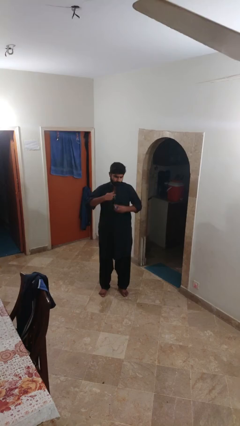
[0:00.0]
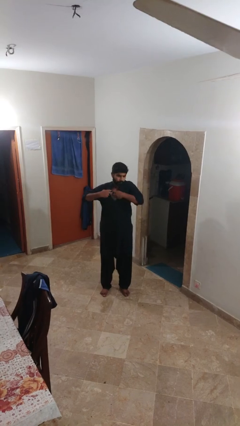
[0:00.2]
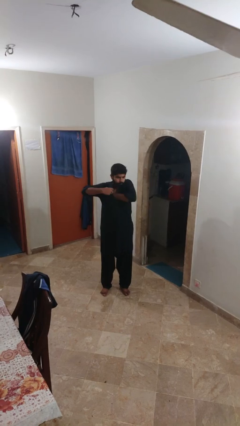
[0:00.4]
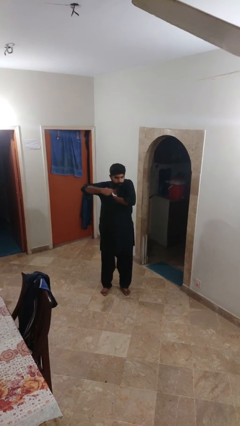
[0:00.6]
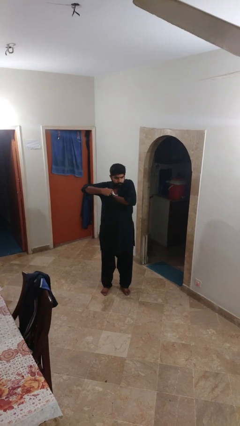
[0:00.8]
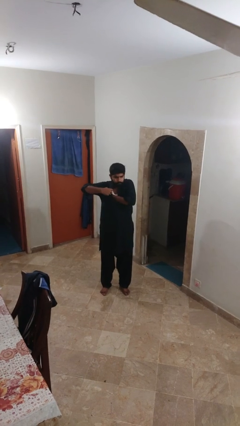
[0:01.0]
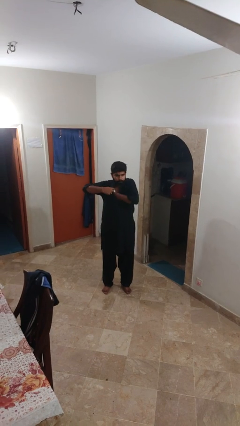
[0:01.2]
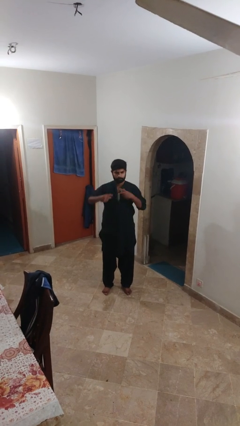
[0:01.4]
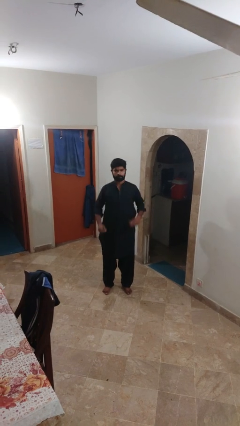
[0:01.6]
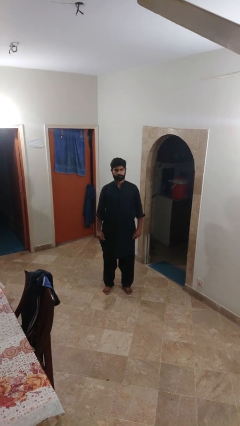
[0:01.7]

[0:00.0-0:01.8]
person applies deodorant

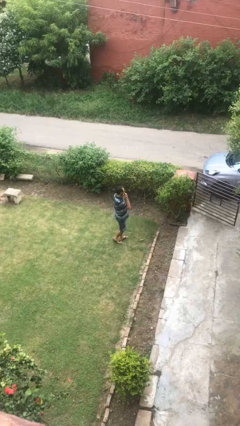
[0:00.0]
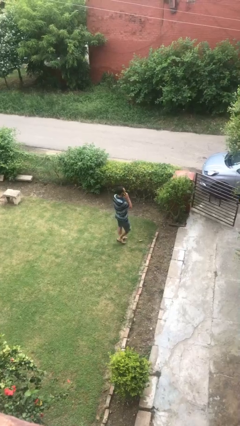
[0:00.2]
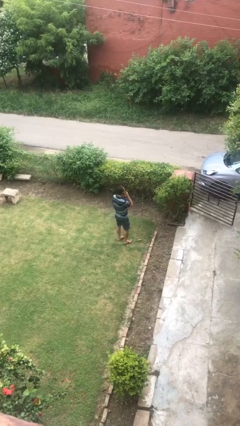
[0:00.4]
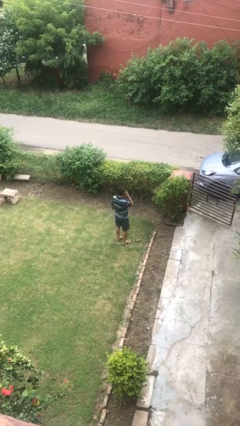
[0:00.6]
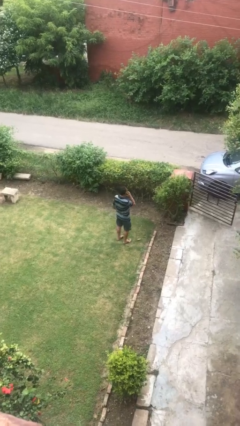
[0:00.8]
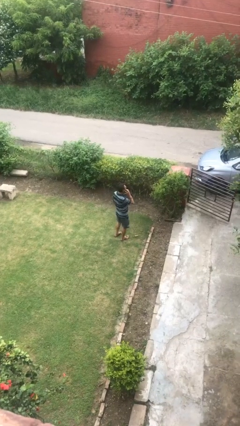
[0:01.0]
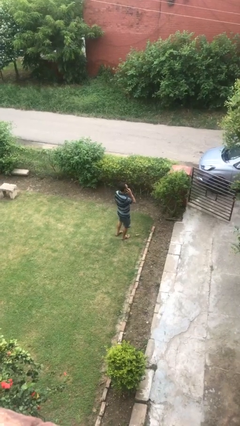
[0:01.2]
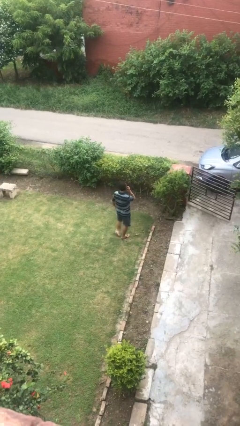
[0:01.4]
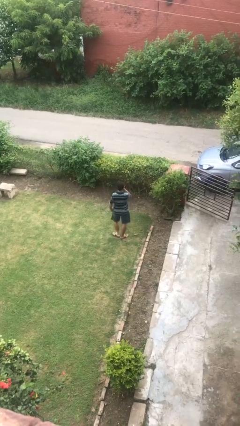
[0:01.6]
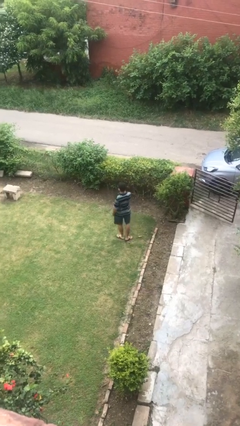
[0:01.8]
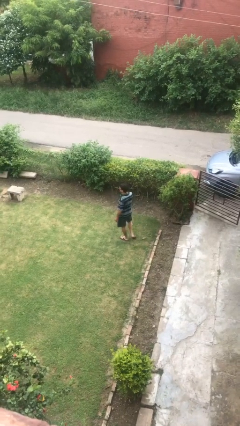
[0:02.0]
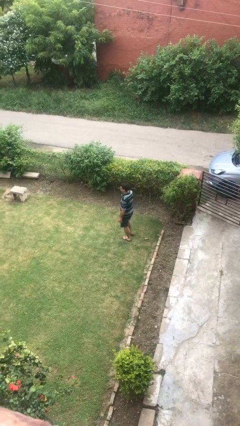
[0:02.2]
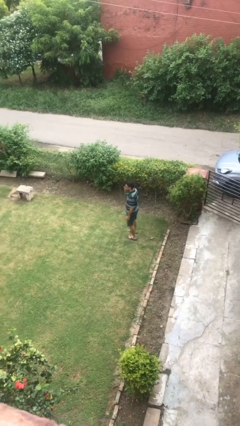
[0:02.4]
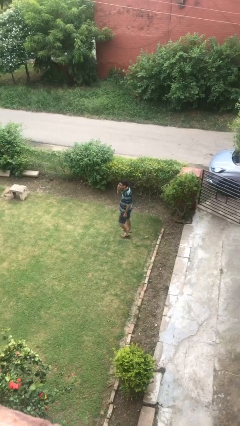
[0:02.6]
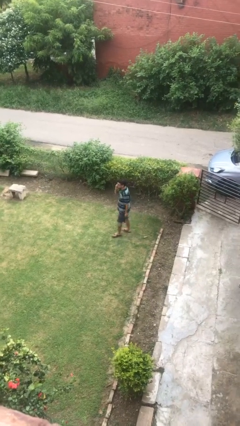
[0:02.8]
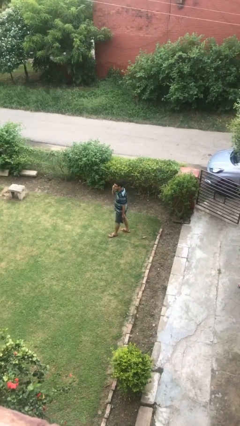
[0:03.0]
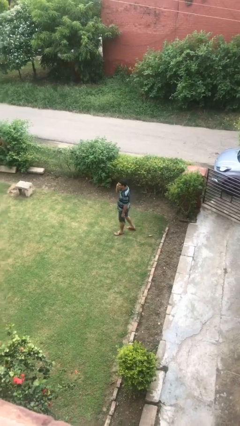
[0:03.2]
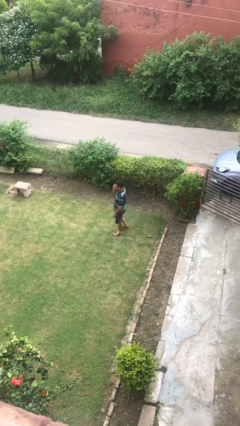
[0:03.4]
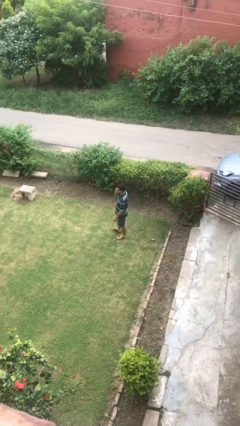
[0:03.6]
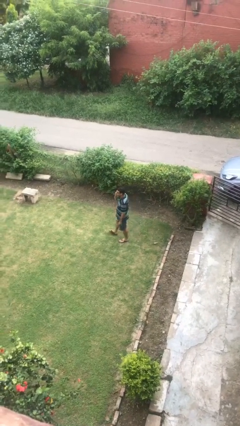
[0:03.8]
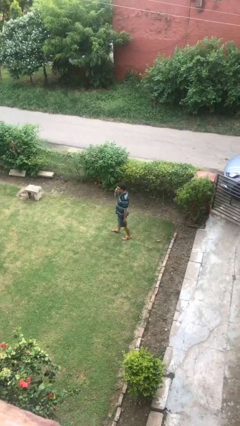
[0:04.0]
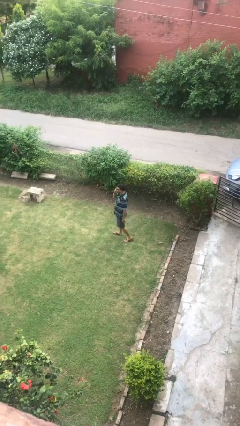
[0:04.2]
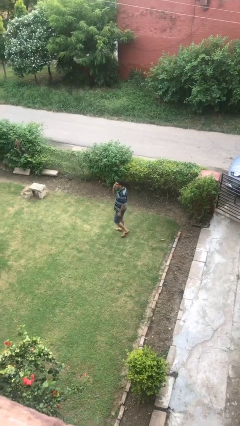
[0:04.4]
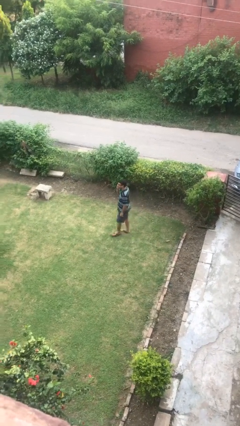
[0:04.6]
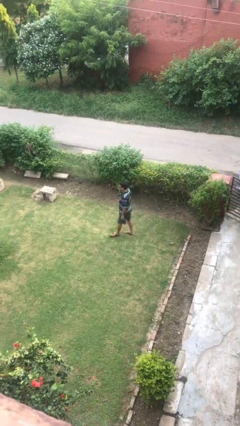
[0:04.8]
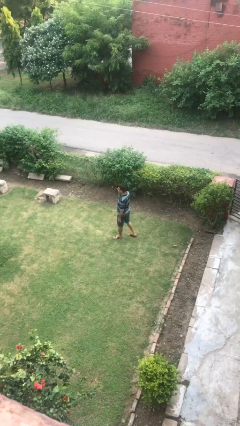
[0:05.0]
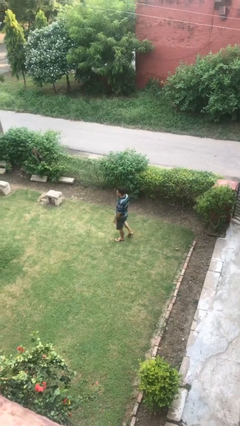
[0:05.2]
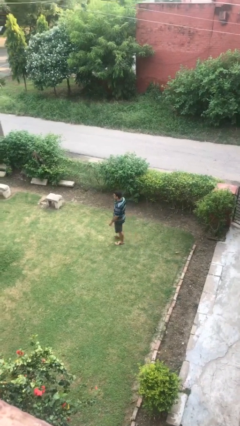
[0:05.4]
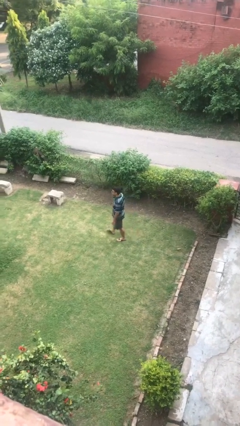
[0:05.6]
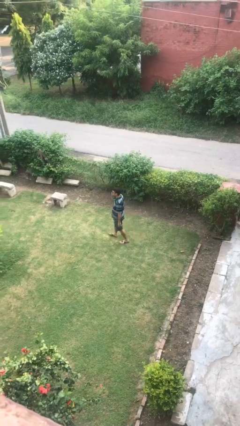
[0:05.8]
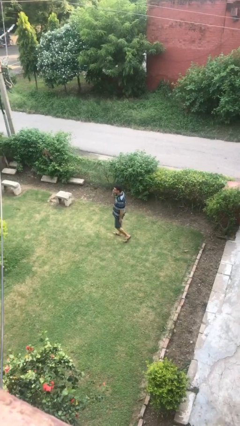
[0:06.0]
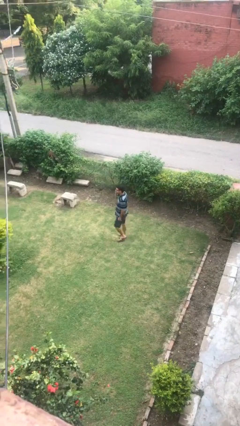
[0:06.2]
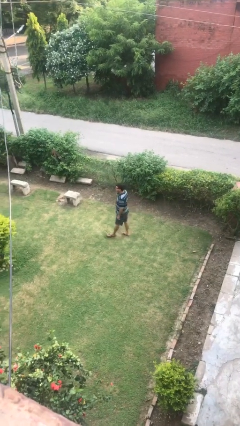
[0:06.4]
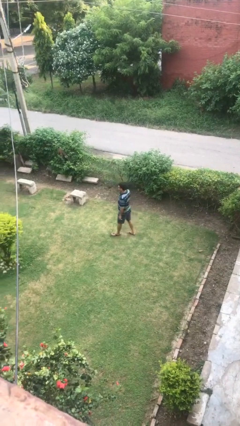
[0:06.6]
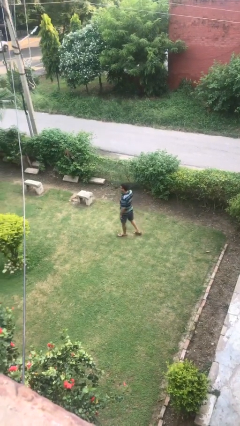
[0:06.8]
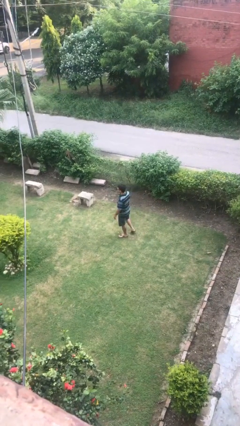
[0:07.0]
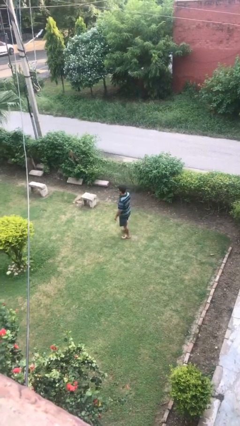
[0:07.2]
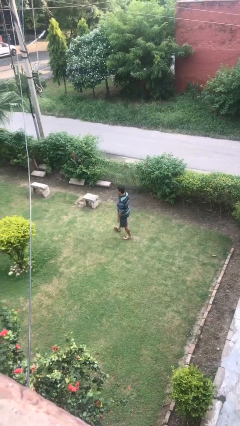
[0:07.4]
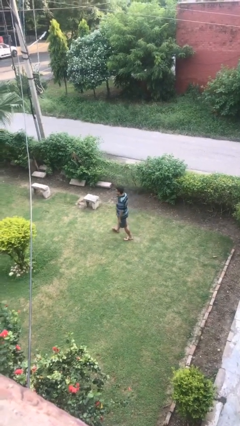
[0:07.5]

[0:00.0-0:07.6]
person talks on phone

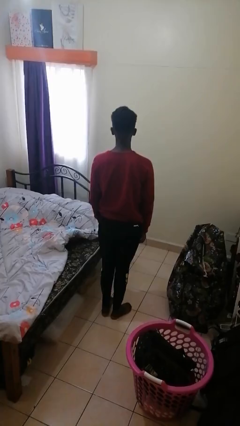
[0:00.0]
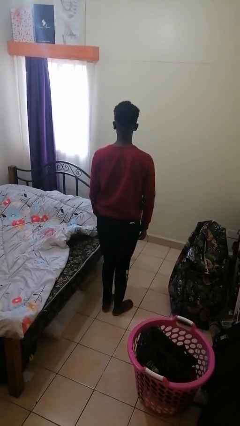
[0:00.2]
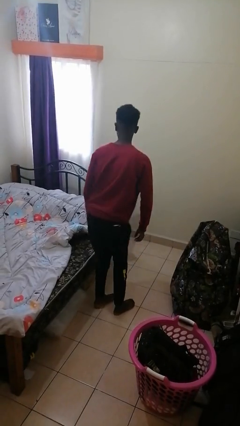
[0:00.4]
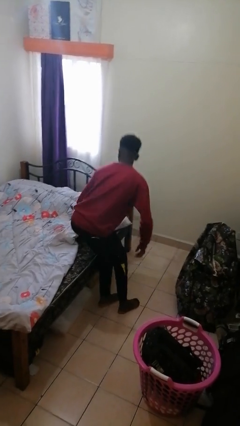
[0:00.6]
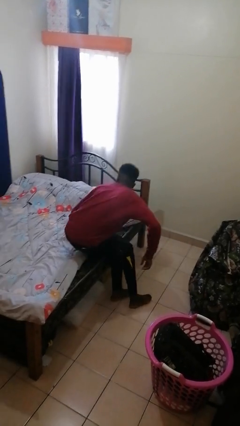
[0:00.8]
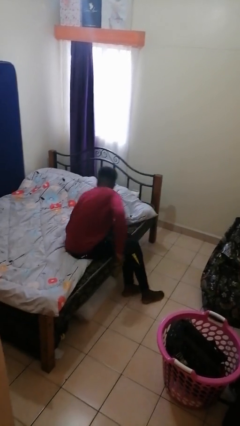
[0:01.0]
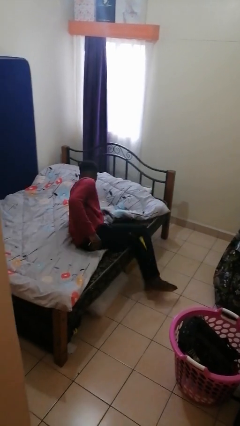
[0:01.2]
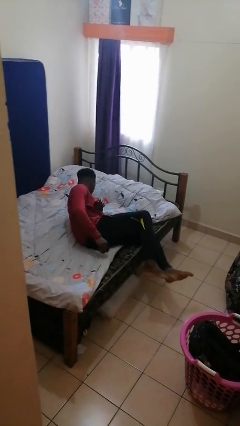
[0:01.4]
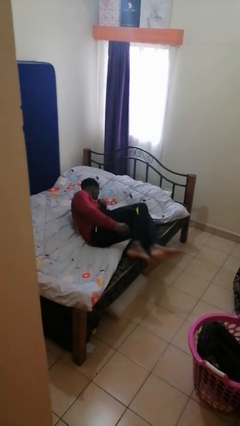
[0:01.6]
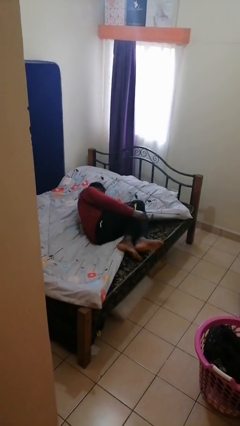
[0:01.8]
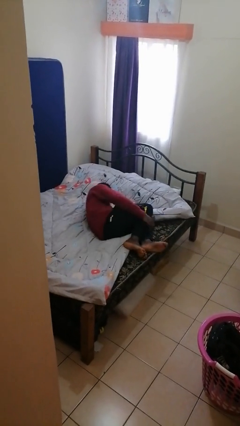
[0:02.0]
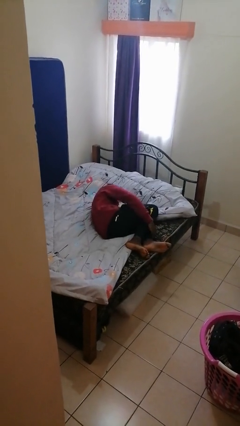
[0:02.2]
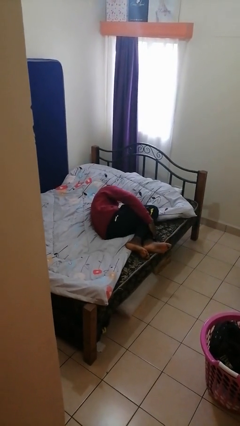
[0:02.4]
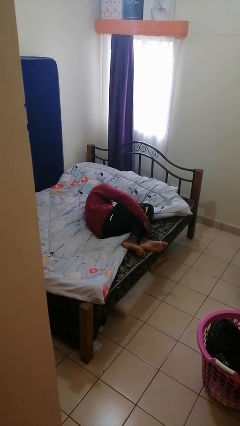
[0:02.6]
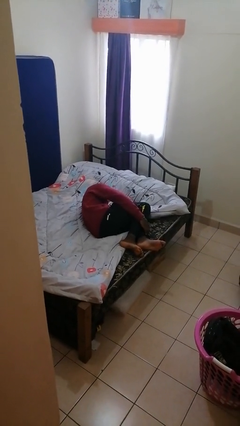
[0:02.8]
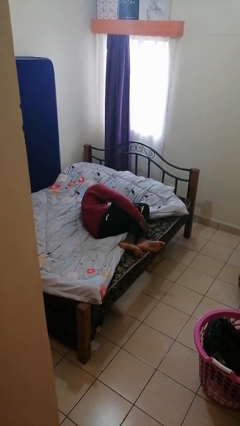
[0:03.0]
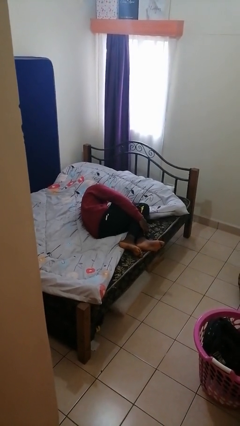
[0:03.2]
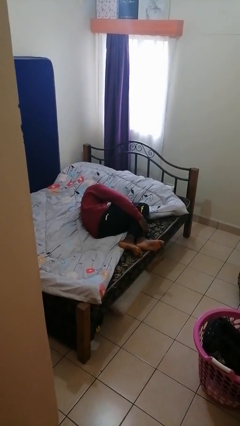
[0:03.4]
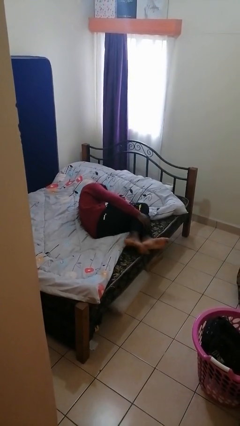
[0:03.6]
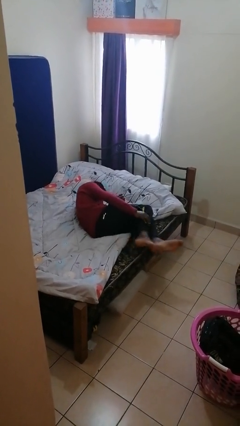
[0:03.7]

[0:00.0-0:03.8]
person lies down on bed

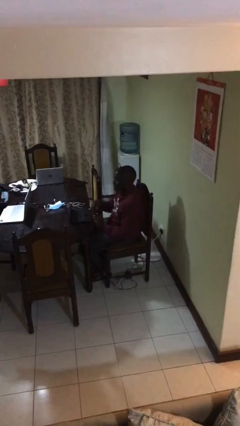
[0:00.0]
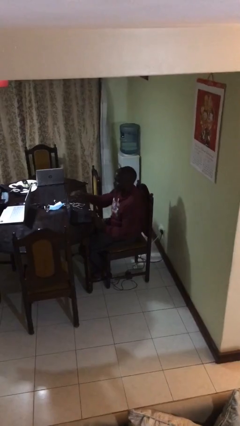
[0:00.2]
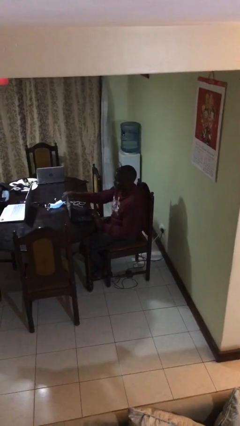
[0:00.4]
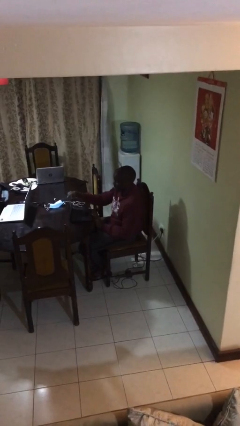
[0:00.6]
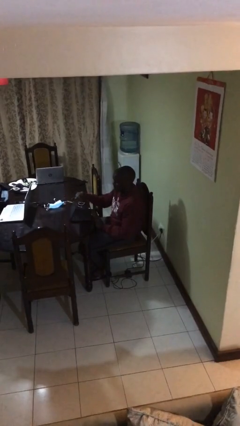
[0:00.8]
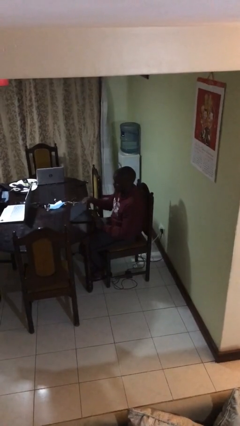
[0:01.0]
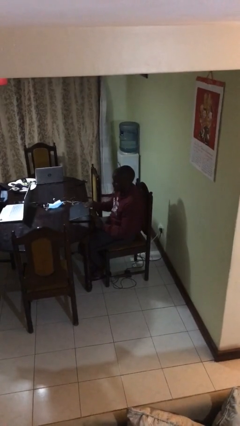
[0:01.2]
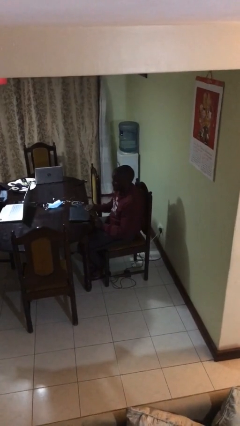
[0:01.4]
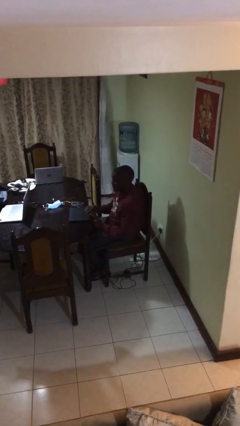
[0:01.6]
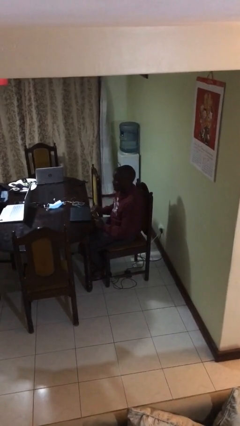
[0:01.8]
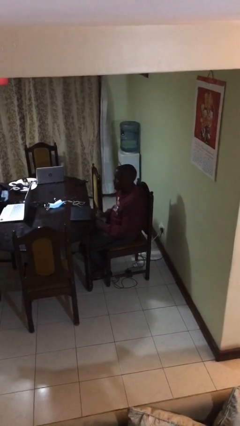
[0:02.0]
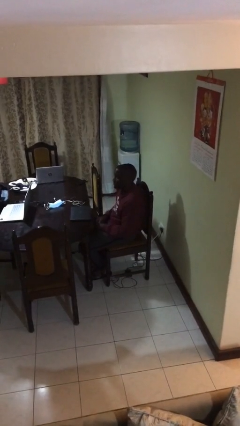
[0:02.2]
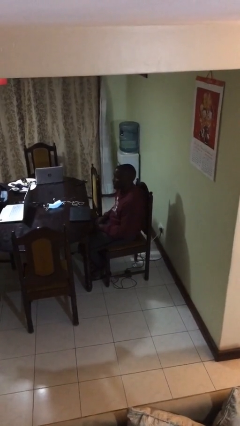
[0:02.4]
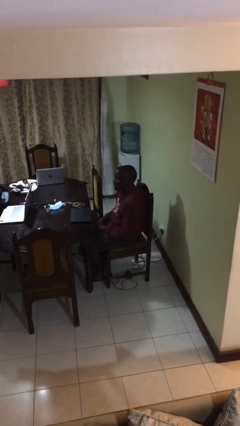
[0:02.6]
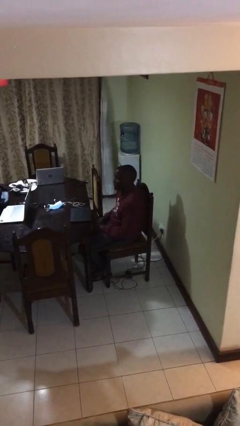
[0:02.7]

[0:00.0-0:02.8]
person closes laptop

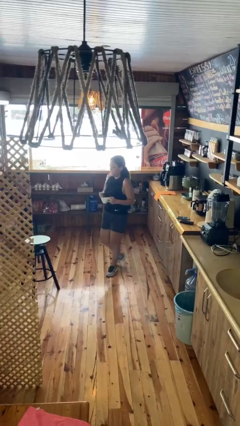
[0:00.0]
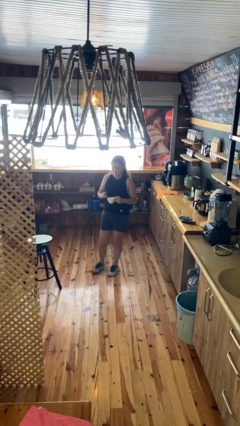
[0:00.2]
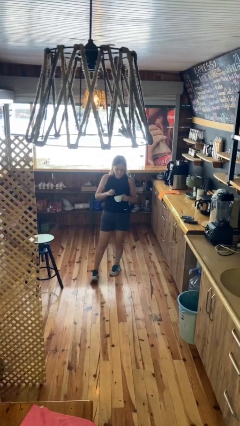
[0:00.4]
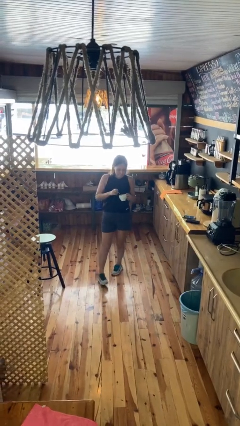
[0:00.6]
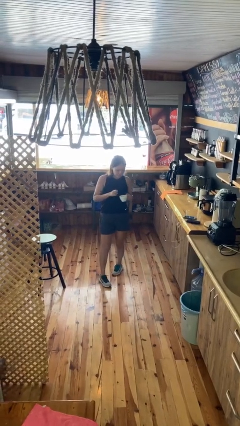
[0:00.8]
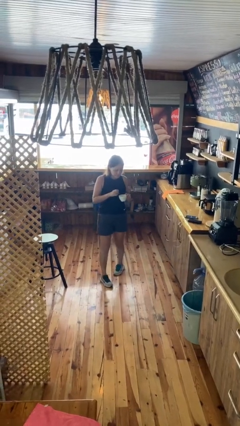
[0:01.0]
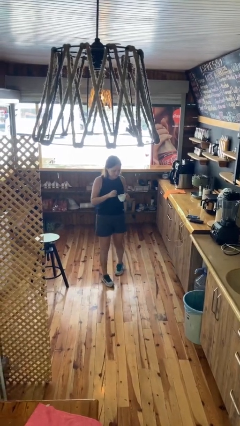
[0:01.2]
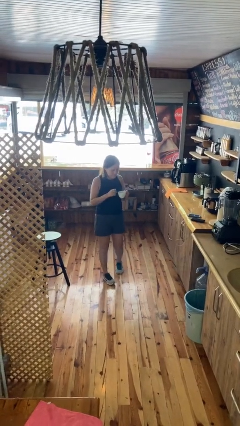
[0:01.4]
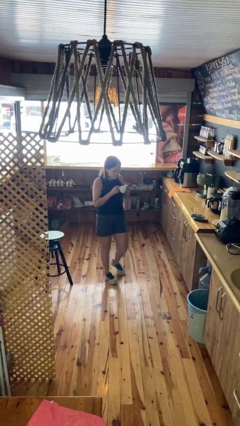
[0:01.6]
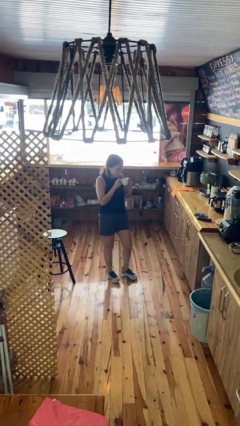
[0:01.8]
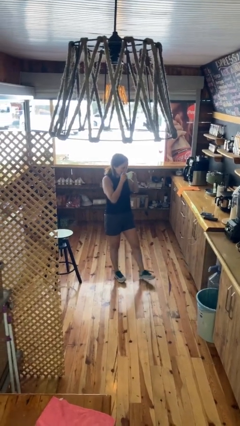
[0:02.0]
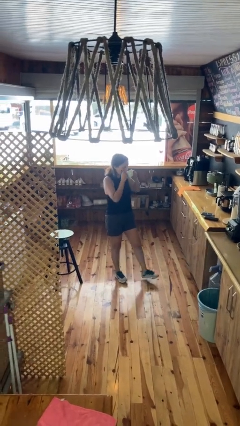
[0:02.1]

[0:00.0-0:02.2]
person stirs mug
